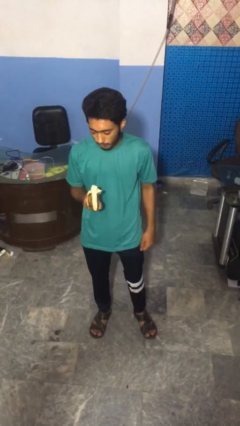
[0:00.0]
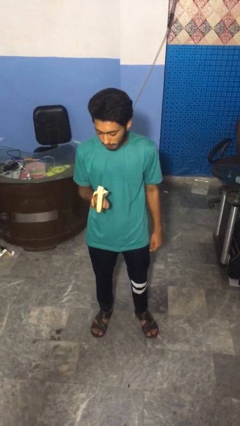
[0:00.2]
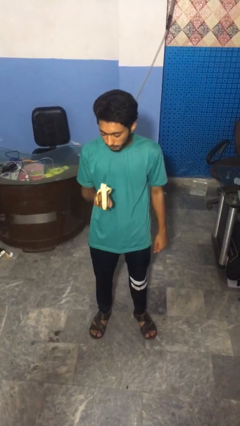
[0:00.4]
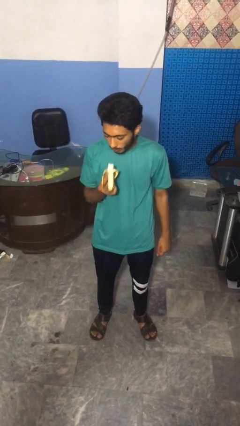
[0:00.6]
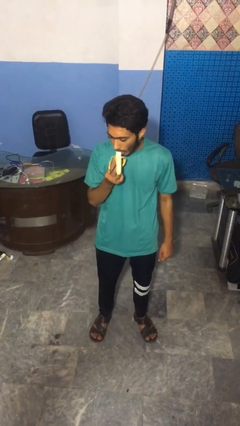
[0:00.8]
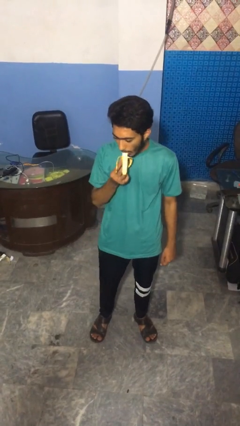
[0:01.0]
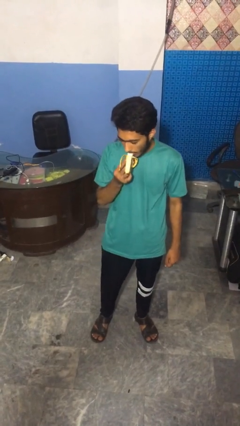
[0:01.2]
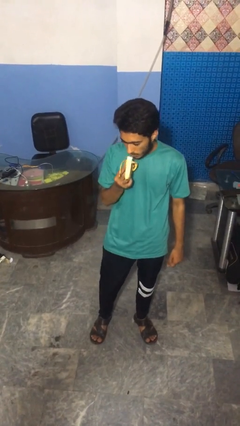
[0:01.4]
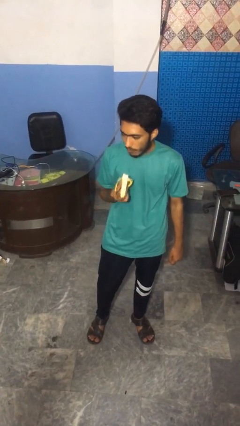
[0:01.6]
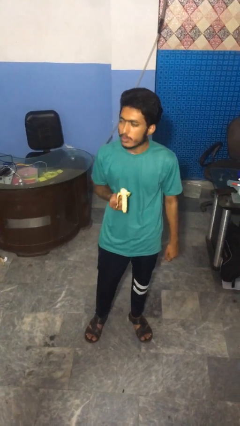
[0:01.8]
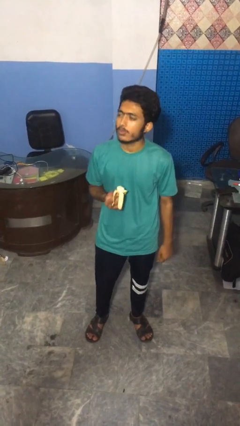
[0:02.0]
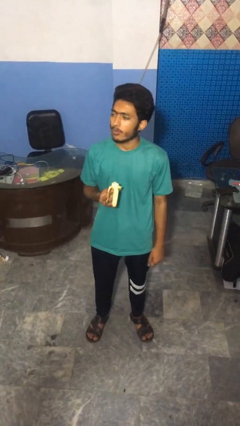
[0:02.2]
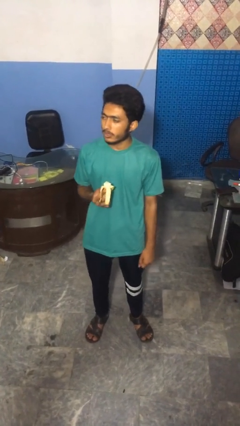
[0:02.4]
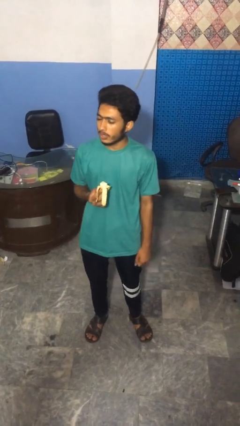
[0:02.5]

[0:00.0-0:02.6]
person eats banana

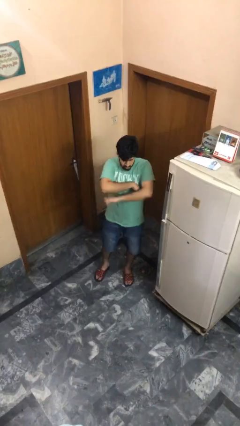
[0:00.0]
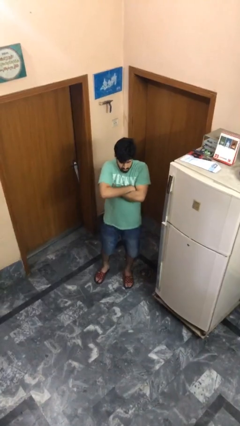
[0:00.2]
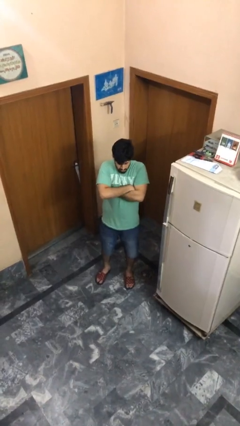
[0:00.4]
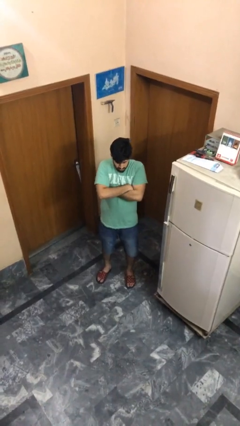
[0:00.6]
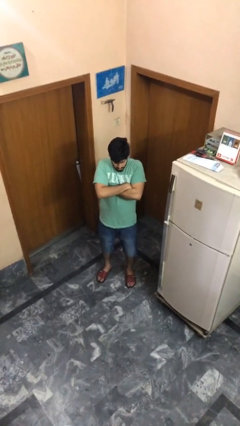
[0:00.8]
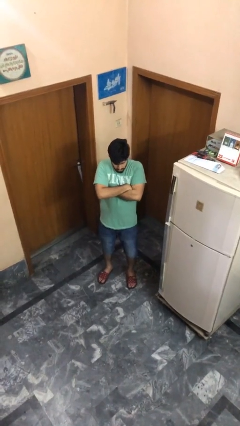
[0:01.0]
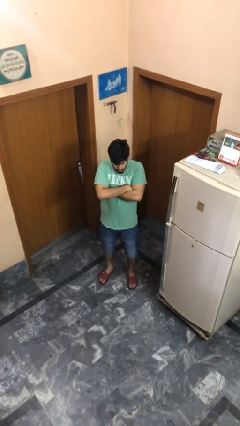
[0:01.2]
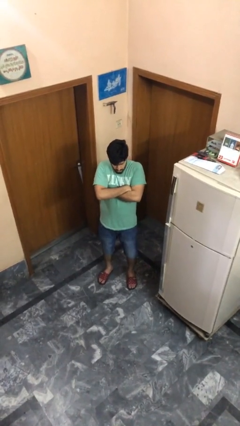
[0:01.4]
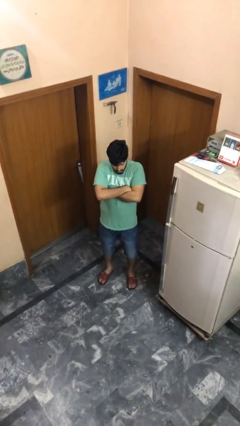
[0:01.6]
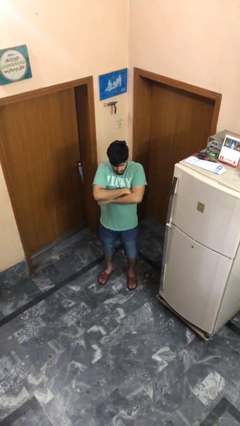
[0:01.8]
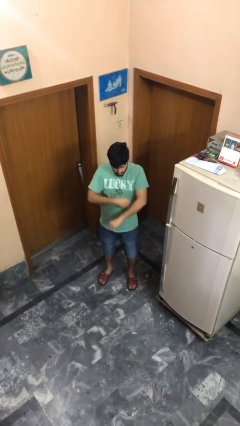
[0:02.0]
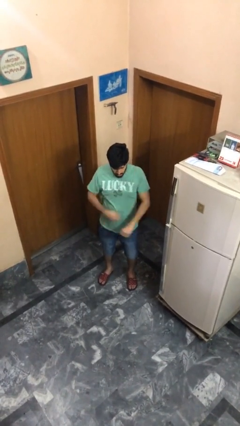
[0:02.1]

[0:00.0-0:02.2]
person crosses arms

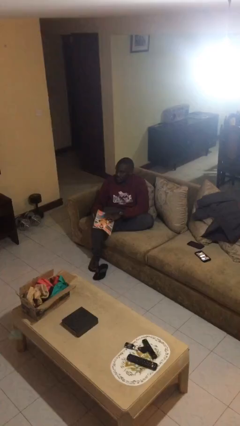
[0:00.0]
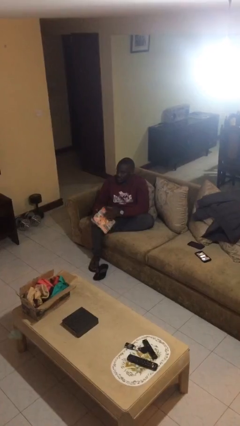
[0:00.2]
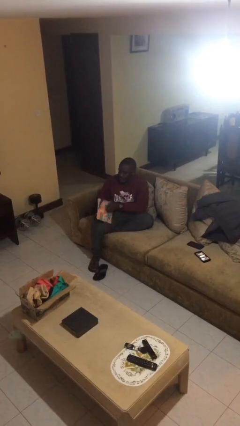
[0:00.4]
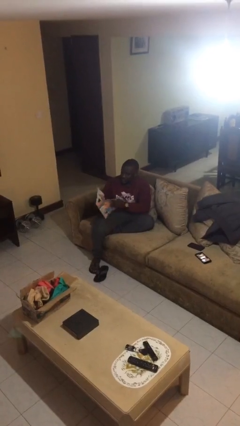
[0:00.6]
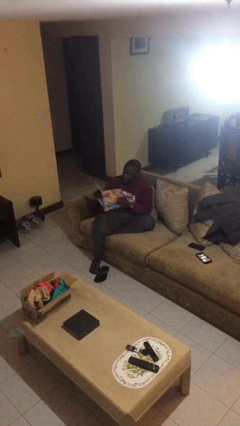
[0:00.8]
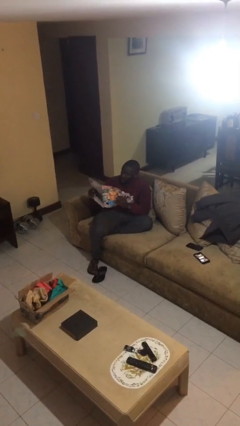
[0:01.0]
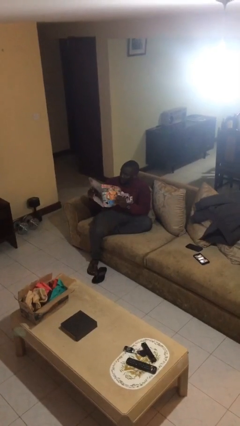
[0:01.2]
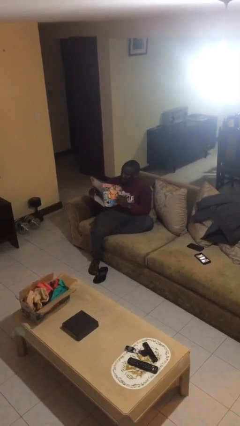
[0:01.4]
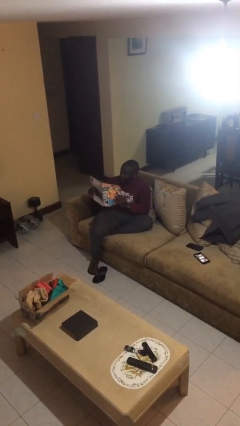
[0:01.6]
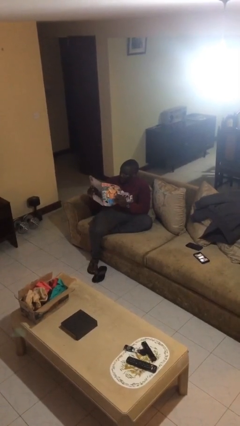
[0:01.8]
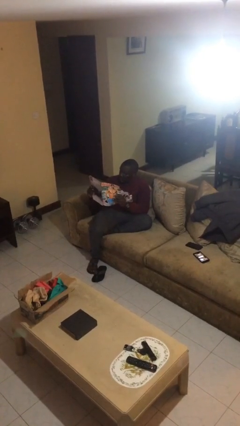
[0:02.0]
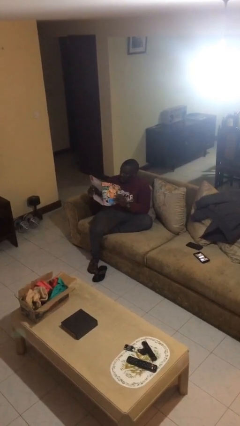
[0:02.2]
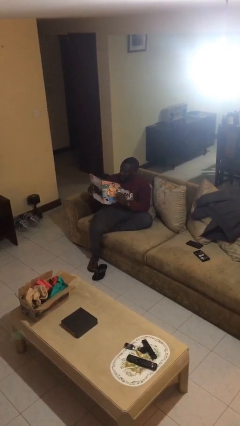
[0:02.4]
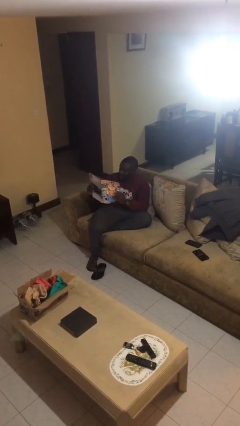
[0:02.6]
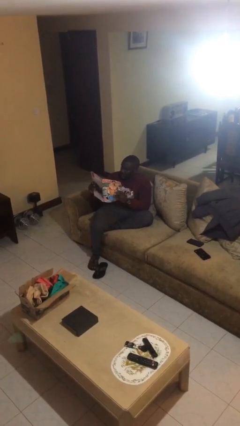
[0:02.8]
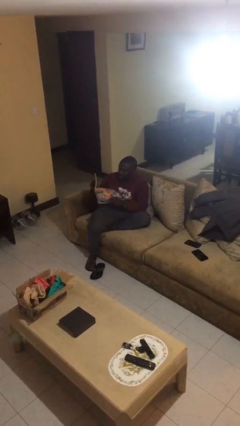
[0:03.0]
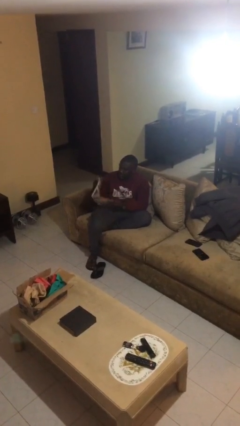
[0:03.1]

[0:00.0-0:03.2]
person reads magazine

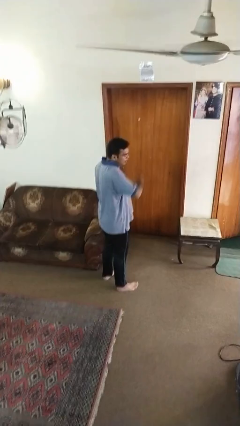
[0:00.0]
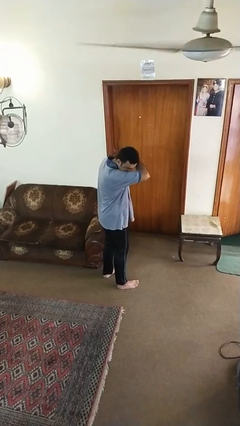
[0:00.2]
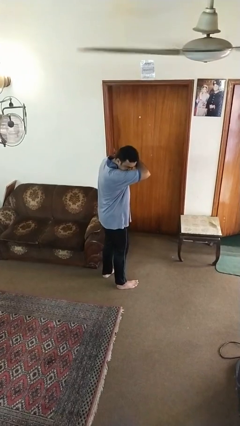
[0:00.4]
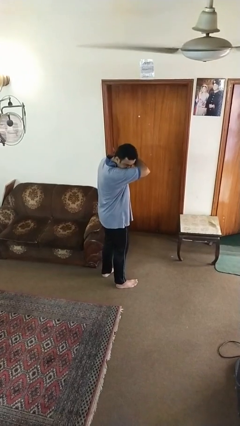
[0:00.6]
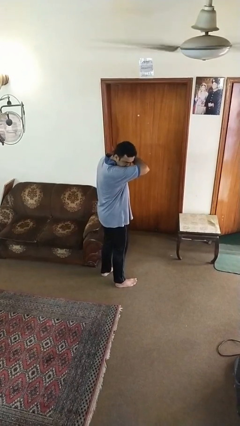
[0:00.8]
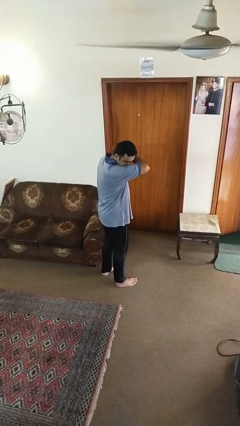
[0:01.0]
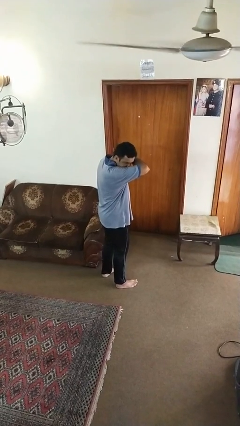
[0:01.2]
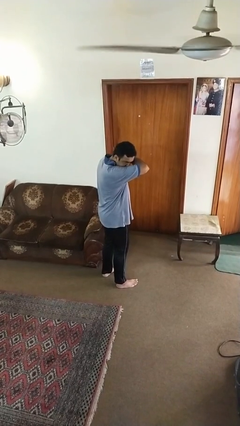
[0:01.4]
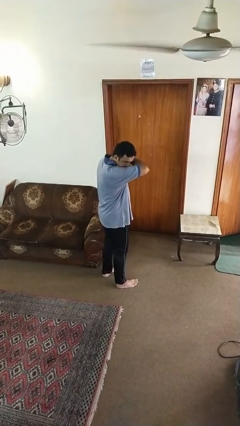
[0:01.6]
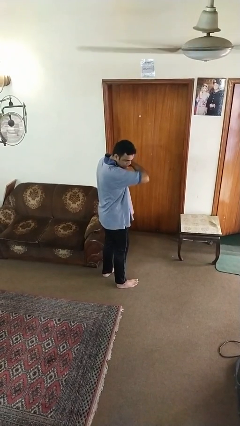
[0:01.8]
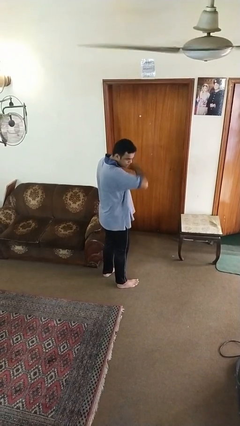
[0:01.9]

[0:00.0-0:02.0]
person sneezes into arm

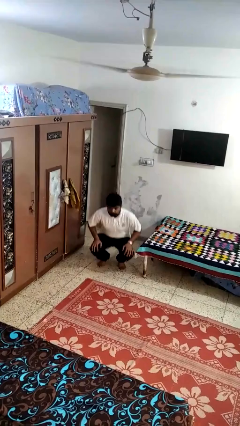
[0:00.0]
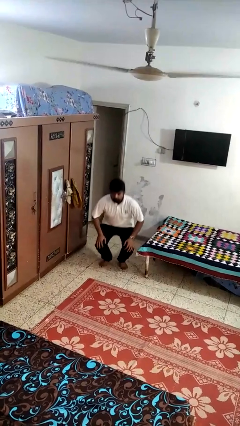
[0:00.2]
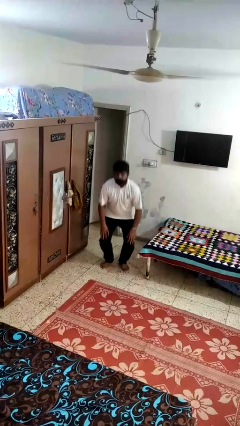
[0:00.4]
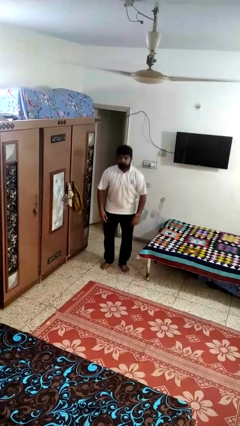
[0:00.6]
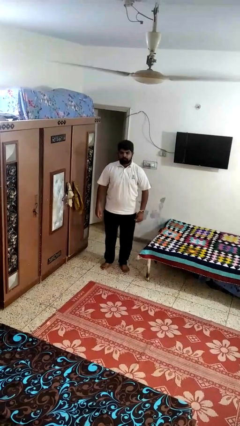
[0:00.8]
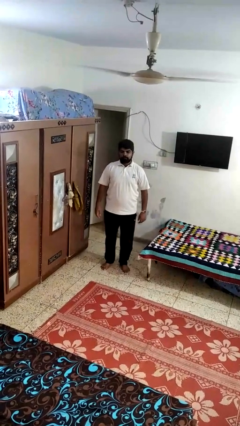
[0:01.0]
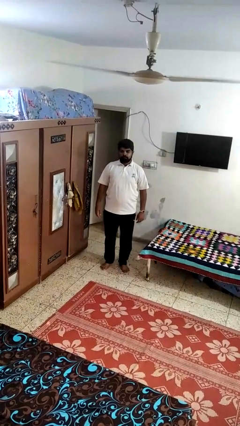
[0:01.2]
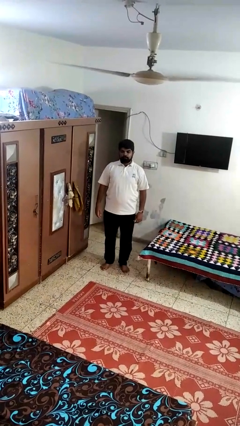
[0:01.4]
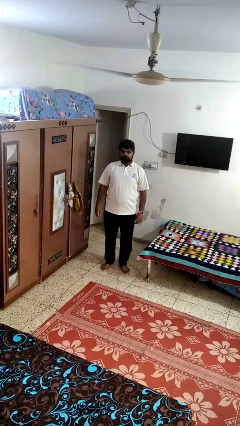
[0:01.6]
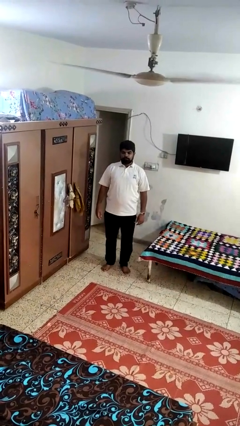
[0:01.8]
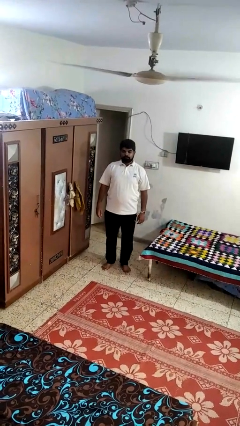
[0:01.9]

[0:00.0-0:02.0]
person stands up

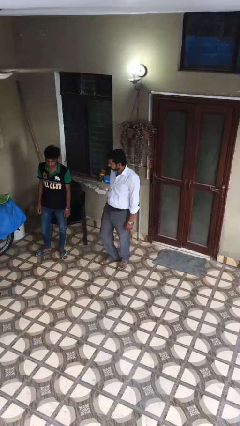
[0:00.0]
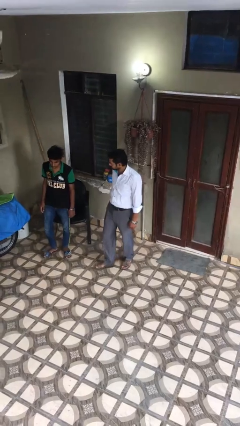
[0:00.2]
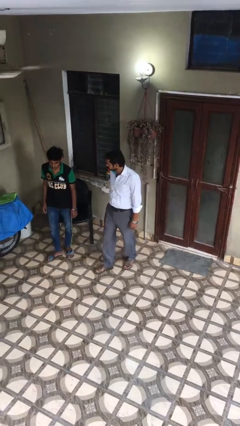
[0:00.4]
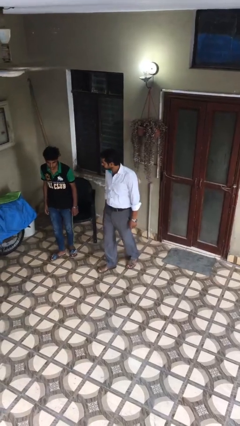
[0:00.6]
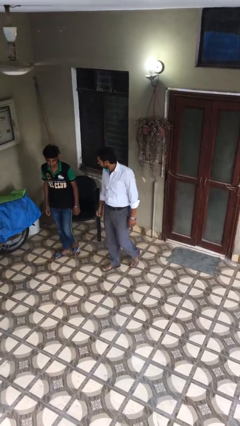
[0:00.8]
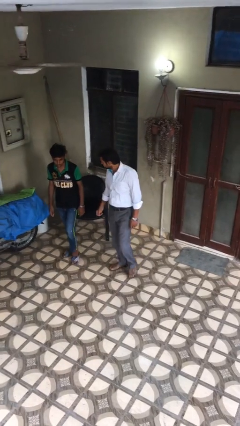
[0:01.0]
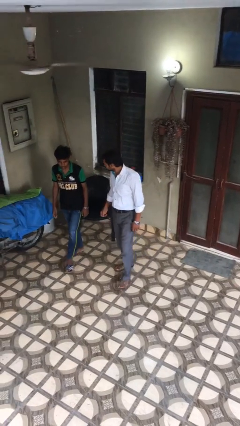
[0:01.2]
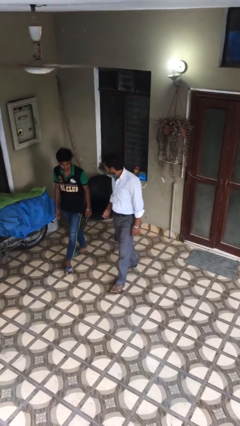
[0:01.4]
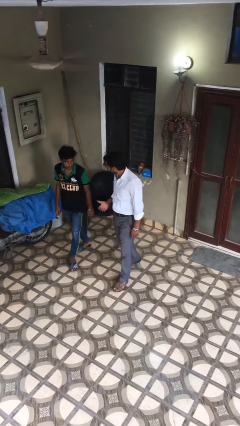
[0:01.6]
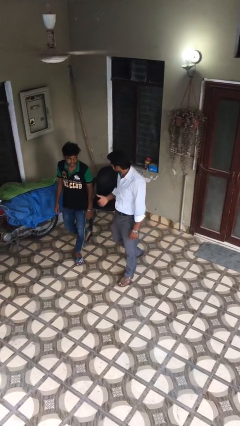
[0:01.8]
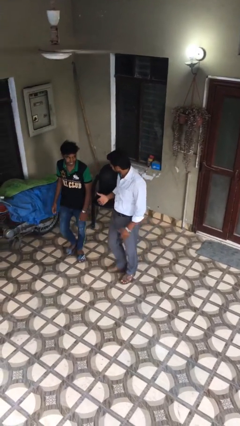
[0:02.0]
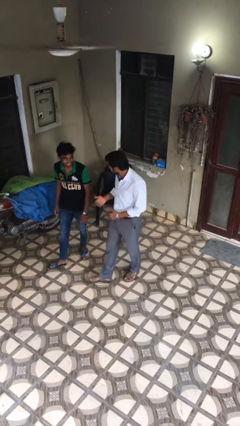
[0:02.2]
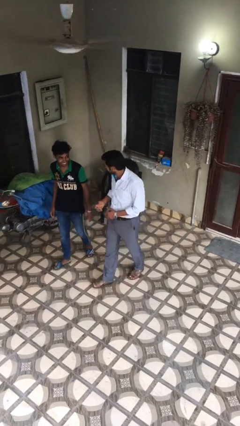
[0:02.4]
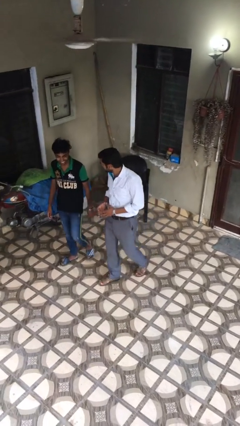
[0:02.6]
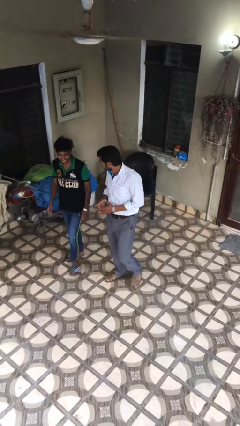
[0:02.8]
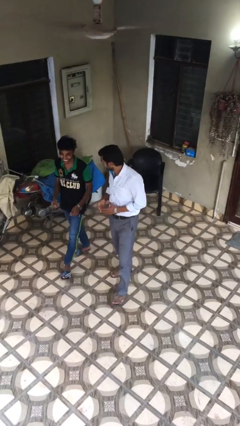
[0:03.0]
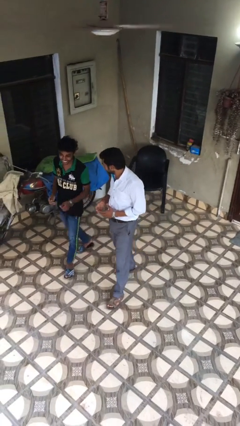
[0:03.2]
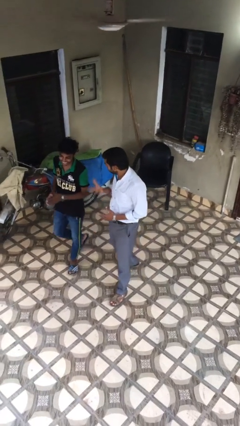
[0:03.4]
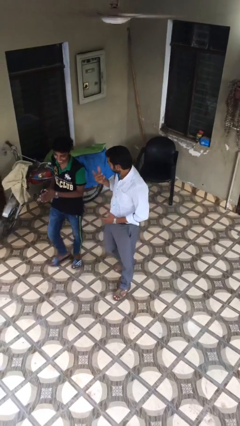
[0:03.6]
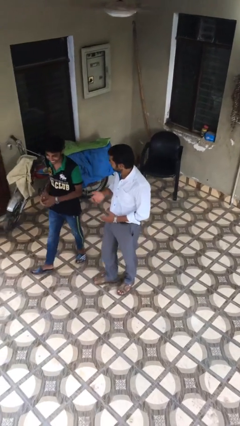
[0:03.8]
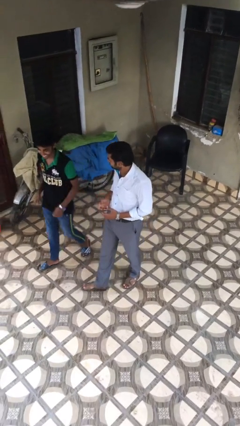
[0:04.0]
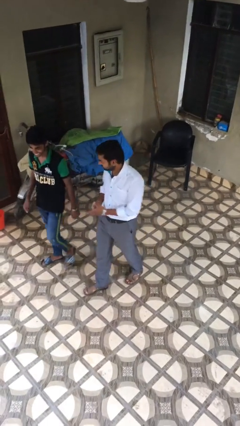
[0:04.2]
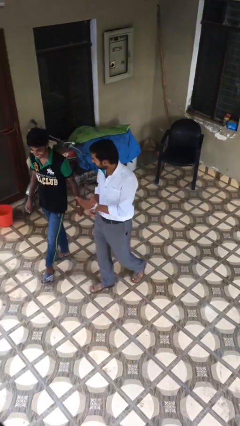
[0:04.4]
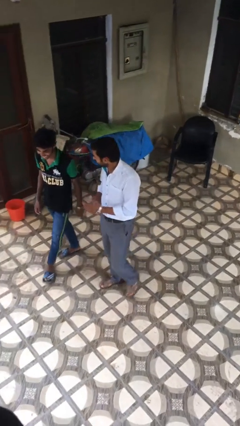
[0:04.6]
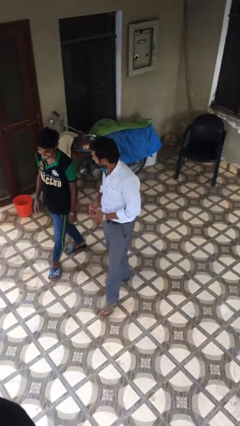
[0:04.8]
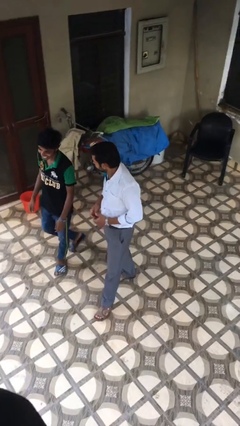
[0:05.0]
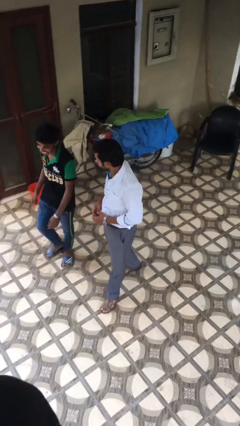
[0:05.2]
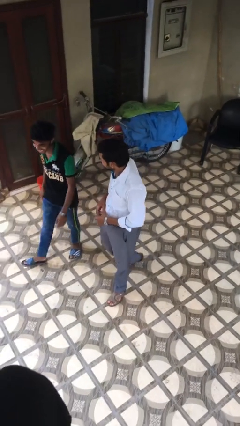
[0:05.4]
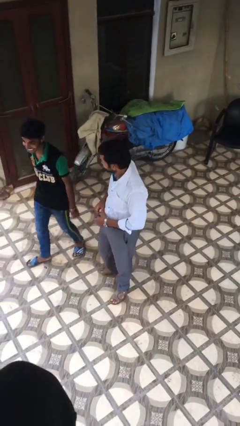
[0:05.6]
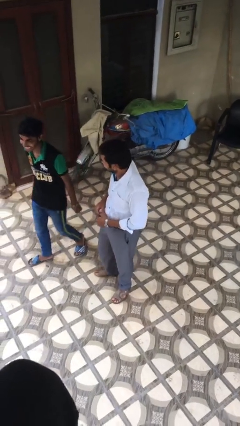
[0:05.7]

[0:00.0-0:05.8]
person talks to person
